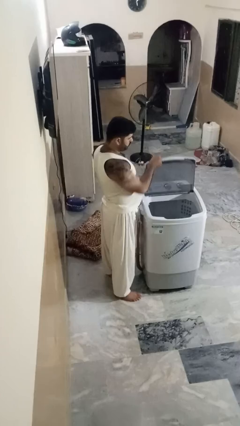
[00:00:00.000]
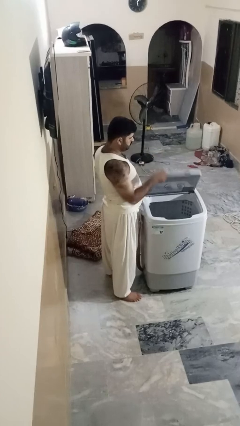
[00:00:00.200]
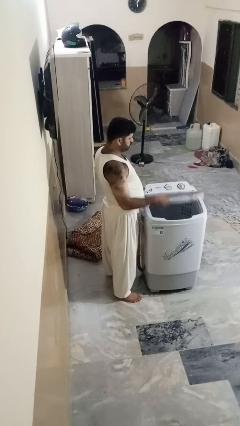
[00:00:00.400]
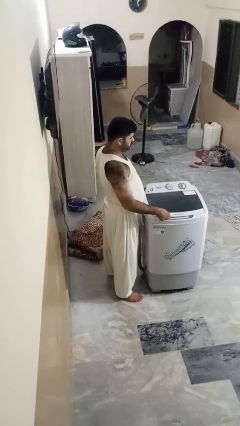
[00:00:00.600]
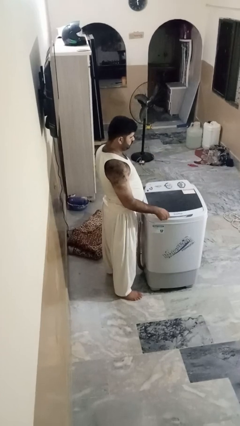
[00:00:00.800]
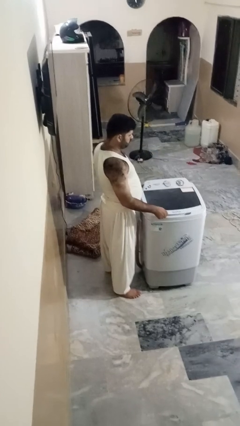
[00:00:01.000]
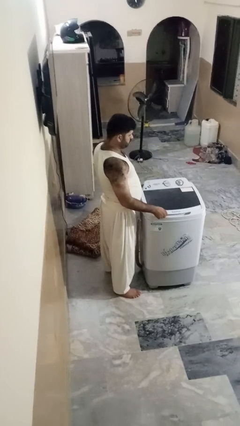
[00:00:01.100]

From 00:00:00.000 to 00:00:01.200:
person closes clothes washer

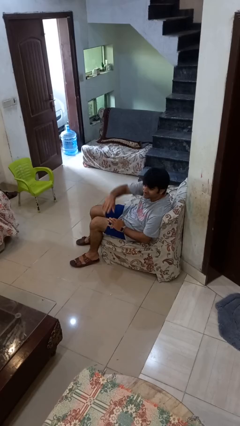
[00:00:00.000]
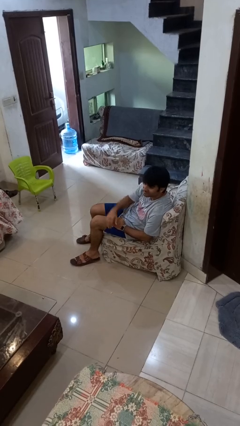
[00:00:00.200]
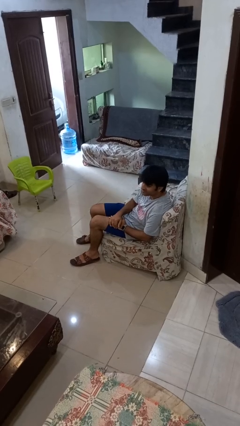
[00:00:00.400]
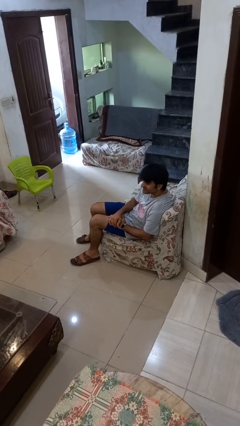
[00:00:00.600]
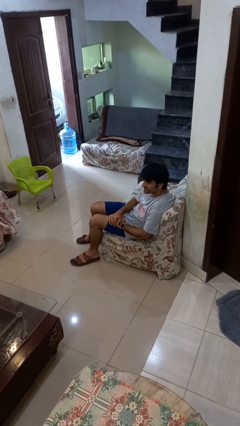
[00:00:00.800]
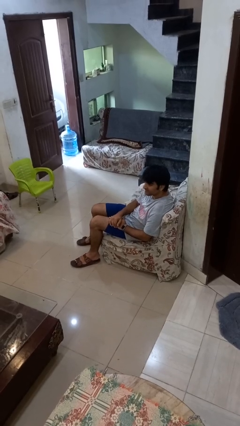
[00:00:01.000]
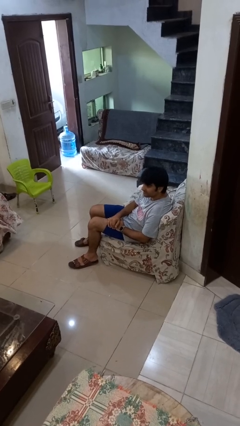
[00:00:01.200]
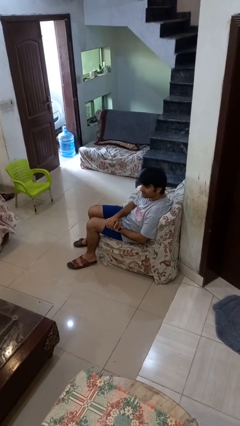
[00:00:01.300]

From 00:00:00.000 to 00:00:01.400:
person gestures lower hand

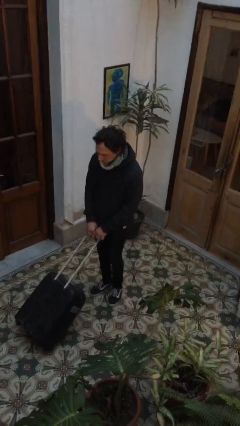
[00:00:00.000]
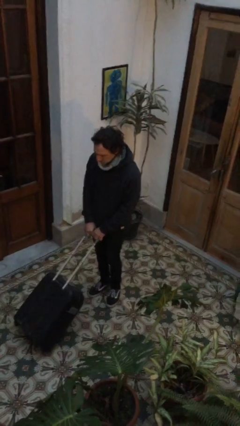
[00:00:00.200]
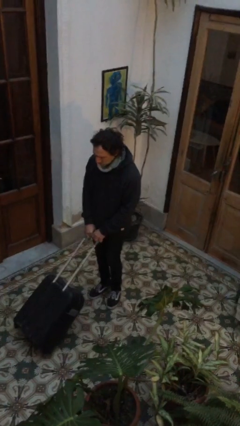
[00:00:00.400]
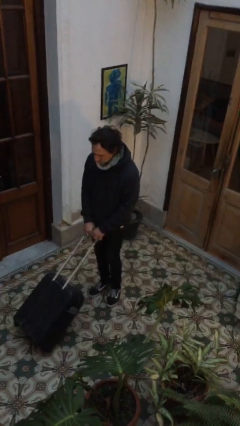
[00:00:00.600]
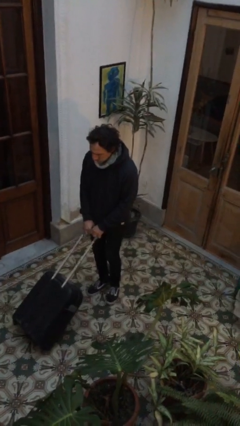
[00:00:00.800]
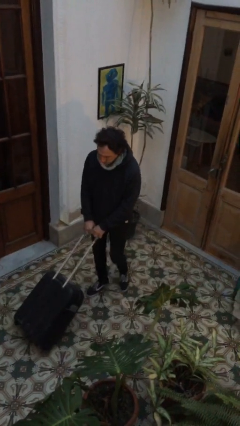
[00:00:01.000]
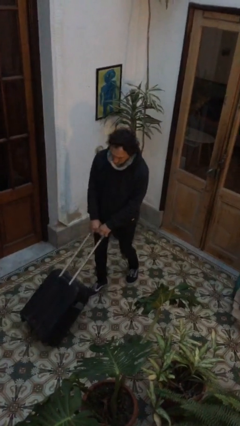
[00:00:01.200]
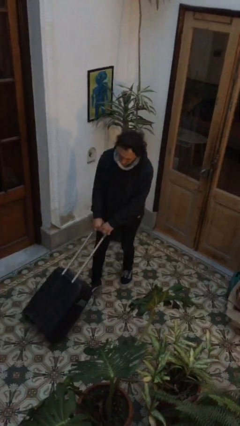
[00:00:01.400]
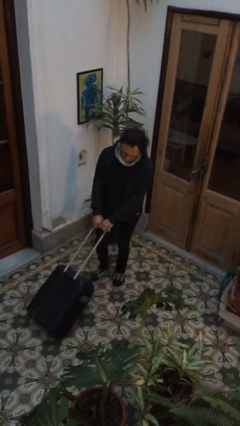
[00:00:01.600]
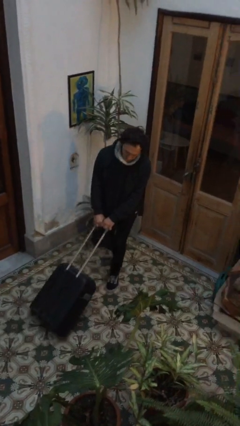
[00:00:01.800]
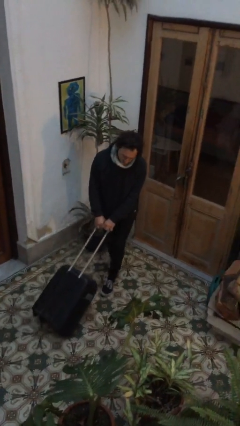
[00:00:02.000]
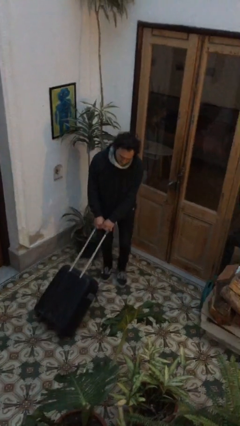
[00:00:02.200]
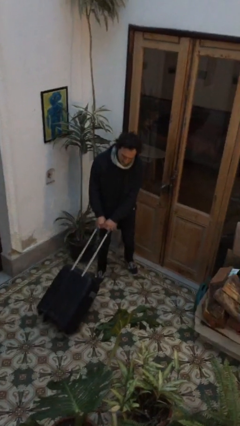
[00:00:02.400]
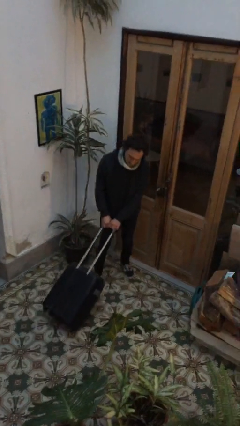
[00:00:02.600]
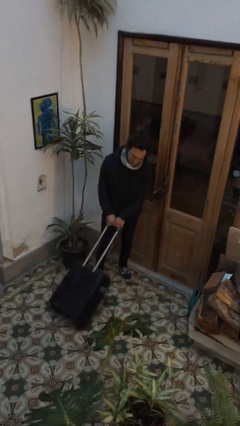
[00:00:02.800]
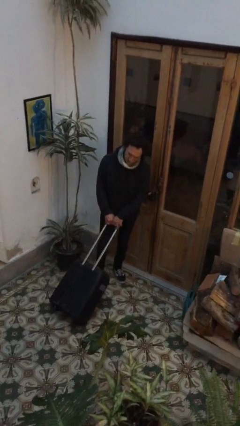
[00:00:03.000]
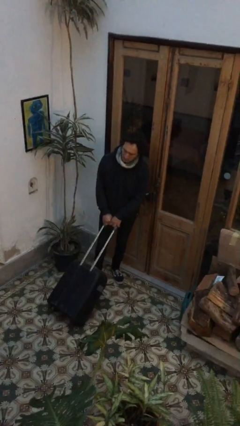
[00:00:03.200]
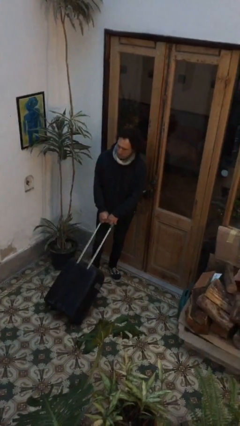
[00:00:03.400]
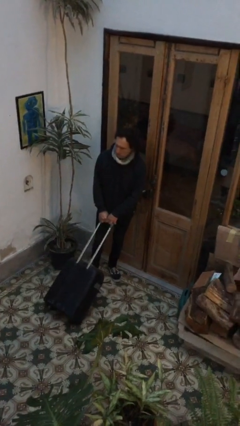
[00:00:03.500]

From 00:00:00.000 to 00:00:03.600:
person pulls wheeled cart

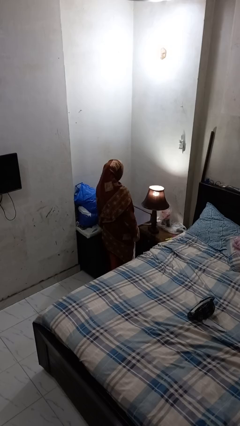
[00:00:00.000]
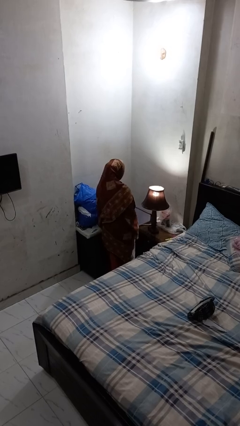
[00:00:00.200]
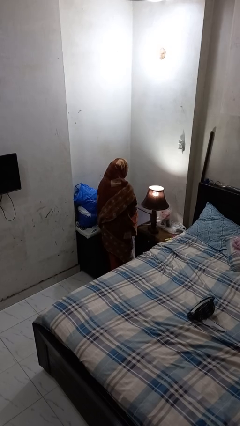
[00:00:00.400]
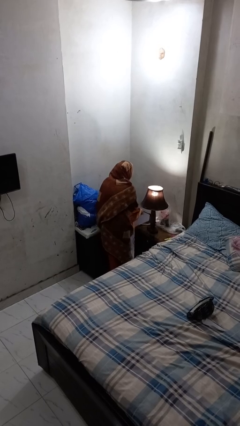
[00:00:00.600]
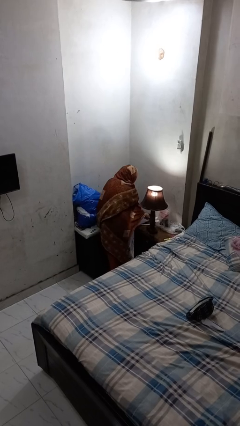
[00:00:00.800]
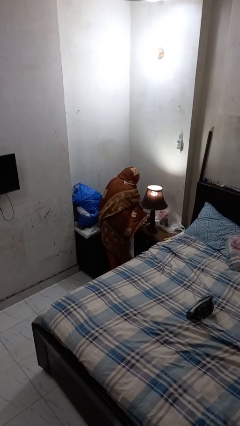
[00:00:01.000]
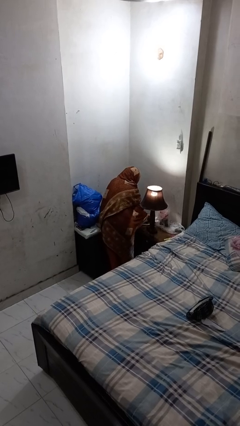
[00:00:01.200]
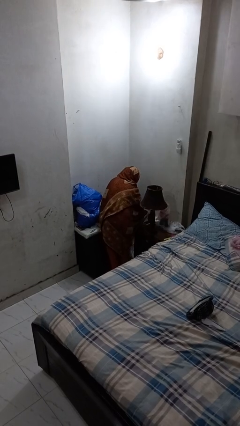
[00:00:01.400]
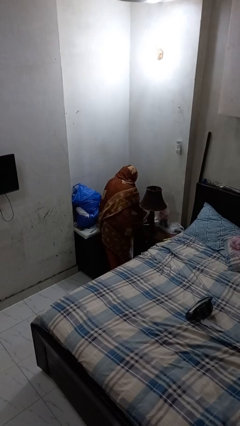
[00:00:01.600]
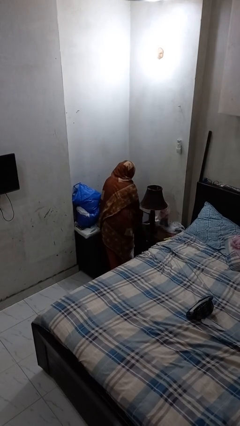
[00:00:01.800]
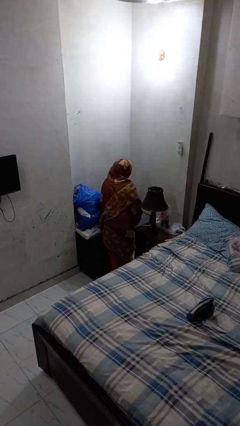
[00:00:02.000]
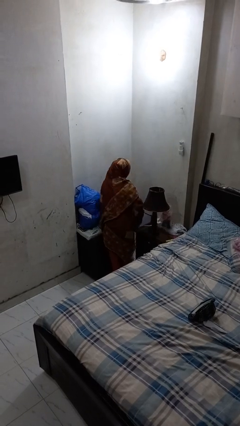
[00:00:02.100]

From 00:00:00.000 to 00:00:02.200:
person turns off lamp

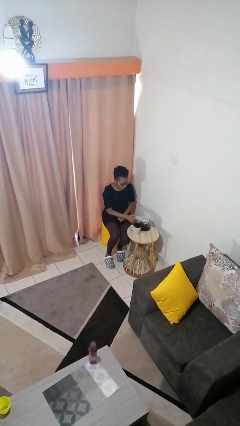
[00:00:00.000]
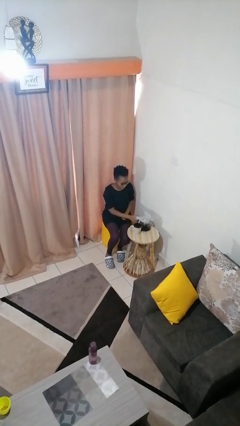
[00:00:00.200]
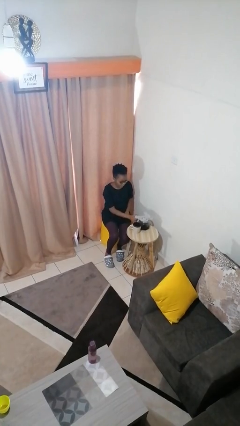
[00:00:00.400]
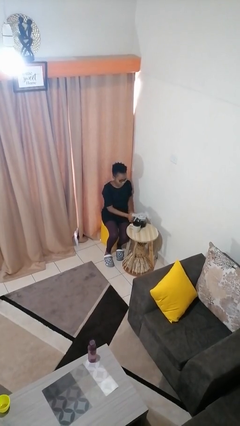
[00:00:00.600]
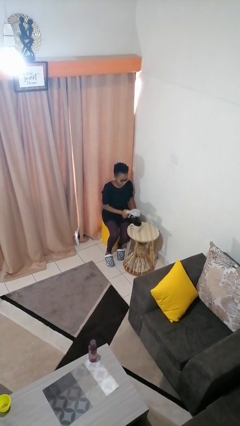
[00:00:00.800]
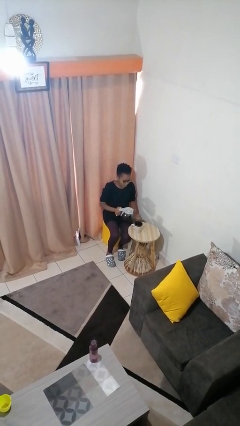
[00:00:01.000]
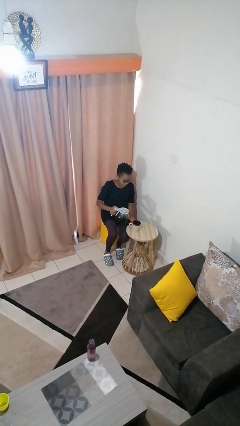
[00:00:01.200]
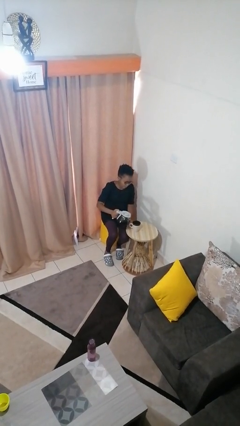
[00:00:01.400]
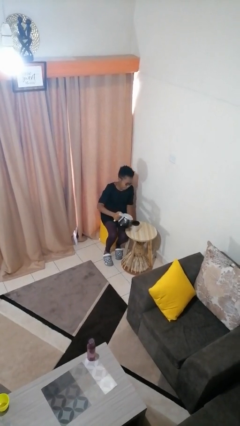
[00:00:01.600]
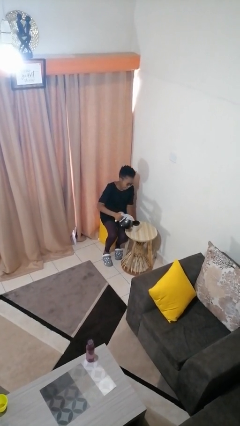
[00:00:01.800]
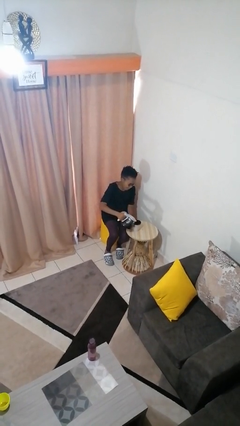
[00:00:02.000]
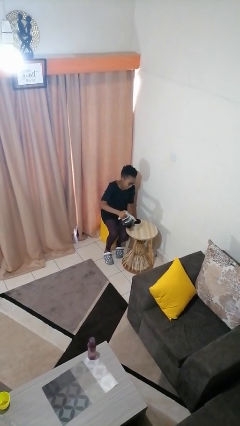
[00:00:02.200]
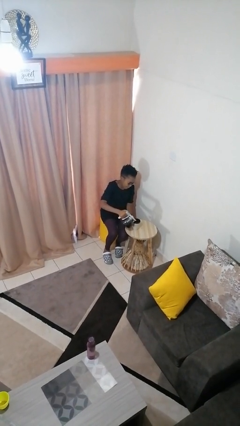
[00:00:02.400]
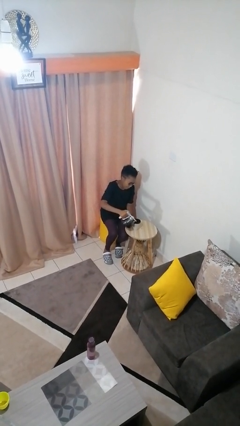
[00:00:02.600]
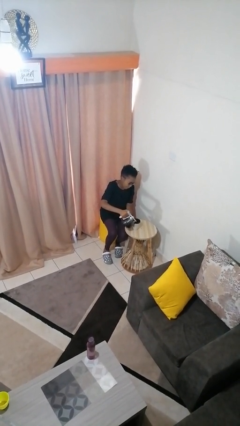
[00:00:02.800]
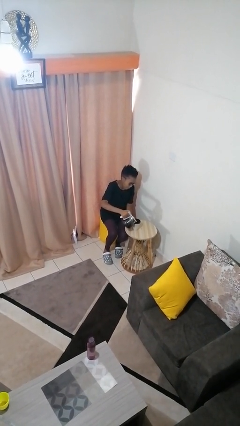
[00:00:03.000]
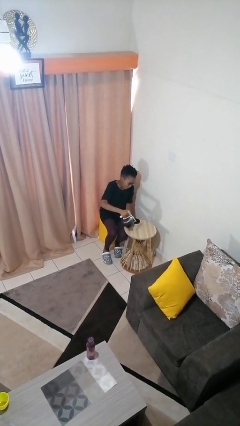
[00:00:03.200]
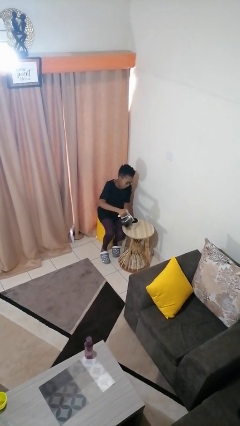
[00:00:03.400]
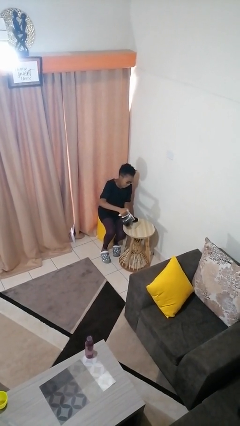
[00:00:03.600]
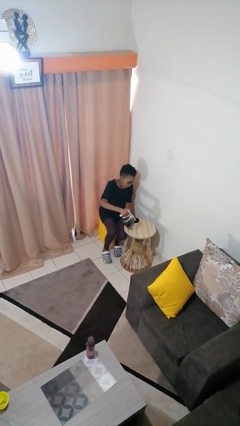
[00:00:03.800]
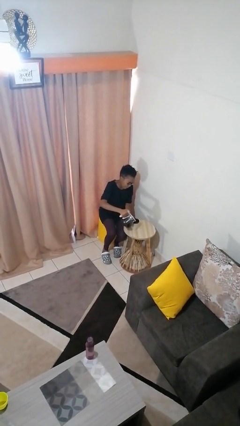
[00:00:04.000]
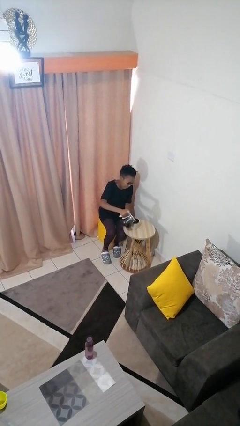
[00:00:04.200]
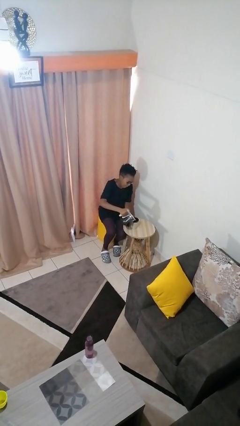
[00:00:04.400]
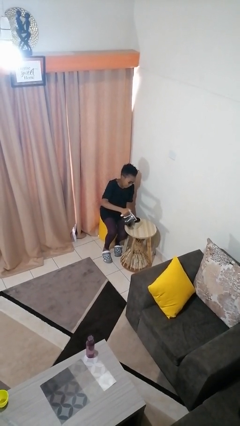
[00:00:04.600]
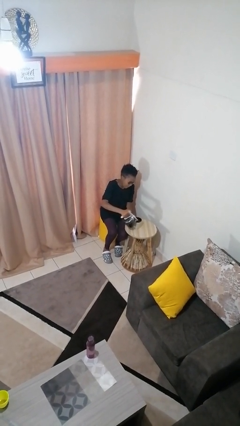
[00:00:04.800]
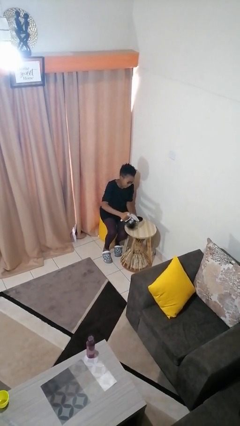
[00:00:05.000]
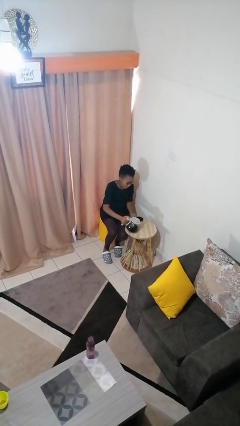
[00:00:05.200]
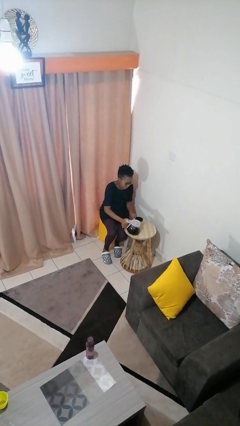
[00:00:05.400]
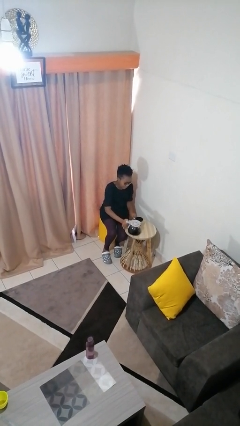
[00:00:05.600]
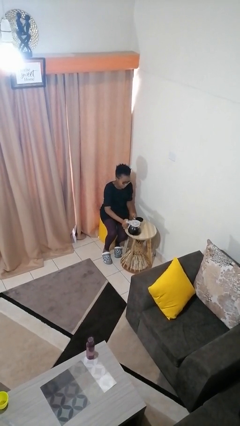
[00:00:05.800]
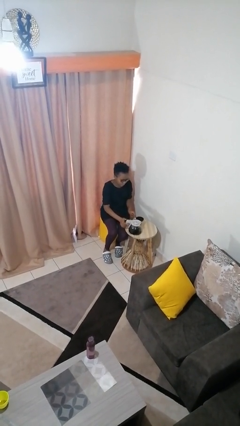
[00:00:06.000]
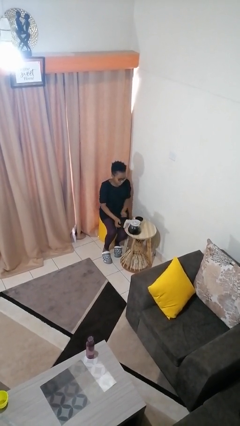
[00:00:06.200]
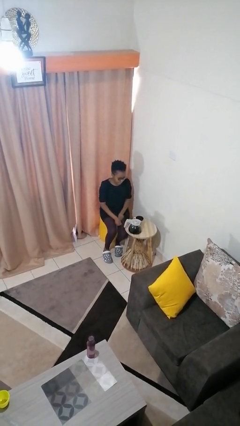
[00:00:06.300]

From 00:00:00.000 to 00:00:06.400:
person pours coffee into mug

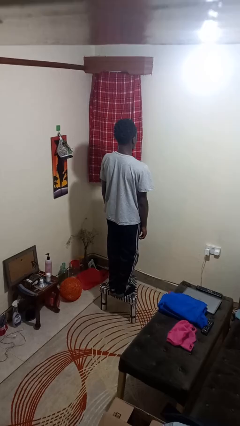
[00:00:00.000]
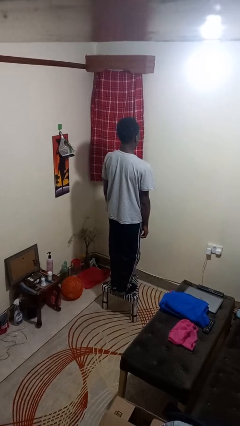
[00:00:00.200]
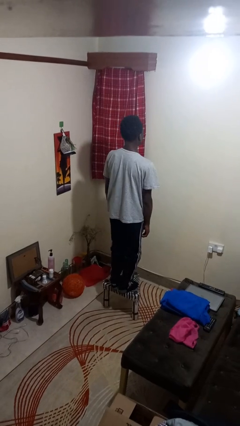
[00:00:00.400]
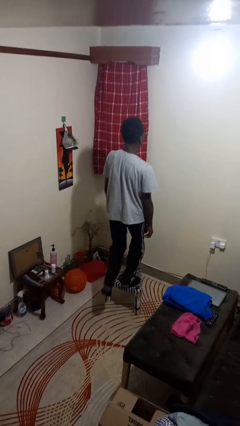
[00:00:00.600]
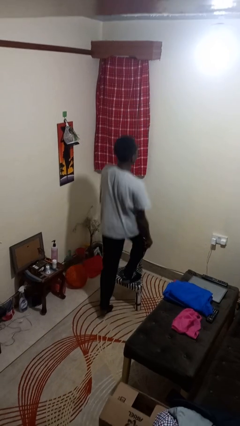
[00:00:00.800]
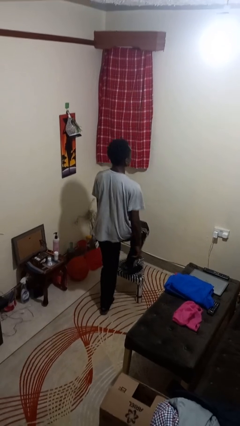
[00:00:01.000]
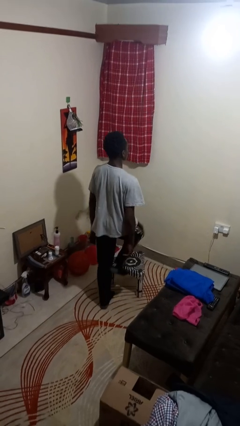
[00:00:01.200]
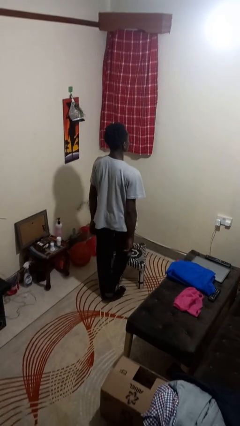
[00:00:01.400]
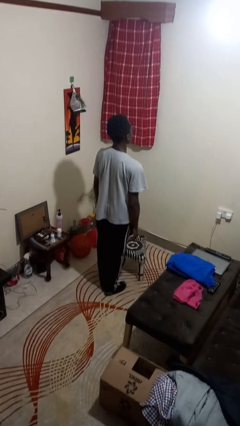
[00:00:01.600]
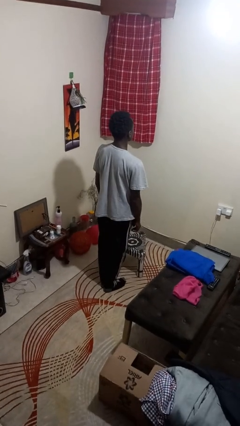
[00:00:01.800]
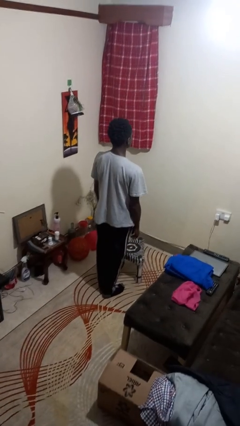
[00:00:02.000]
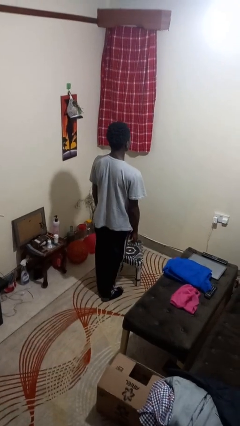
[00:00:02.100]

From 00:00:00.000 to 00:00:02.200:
person climbs off chair

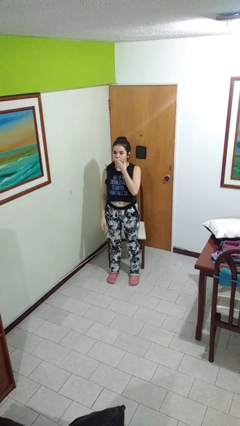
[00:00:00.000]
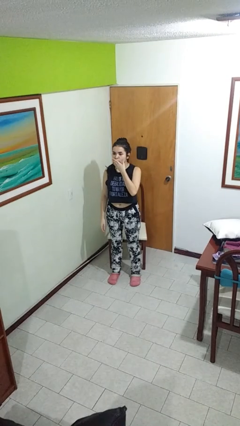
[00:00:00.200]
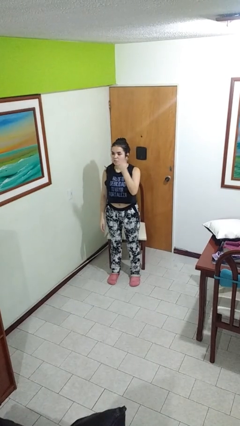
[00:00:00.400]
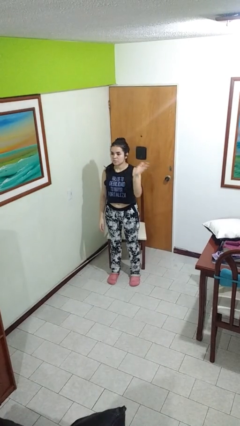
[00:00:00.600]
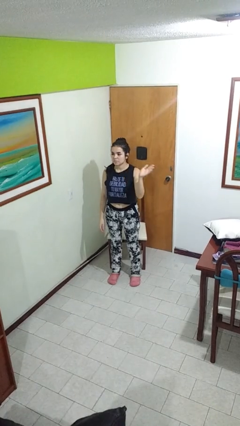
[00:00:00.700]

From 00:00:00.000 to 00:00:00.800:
person gestures blow kiss
